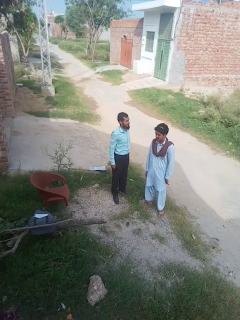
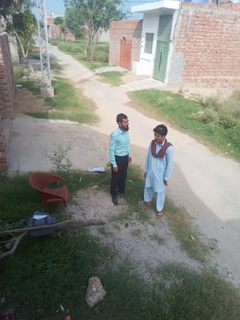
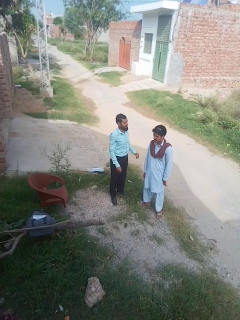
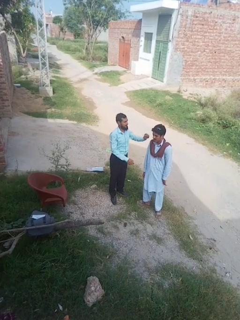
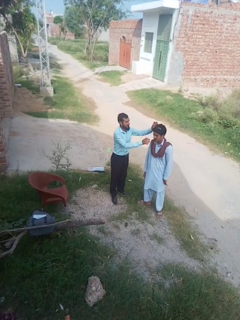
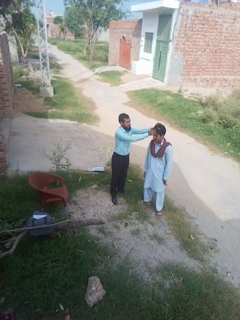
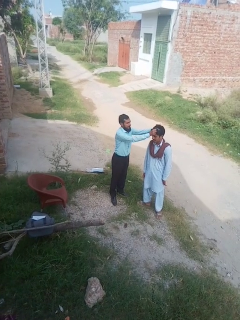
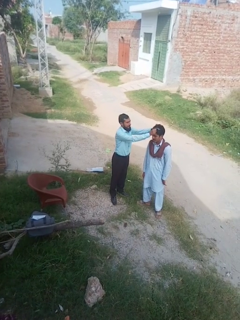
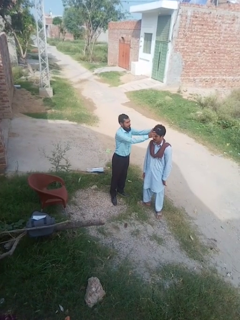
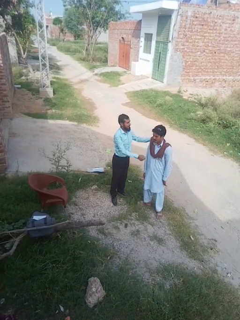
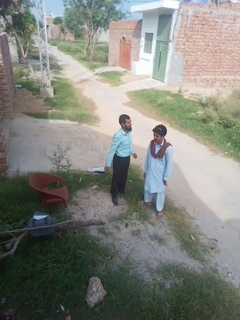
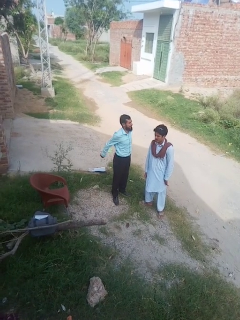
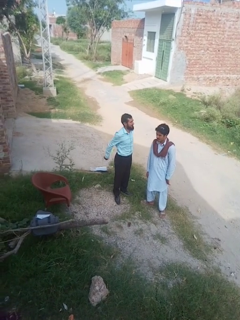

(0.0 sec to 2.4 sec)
person grabs person by hair

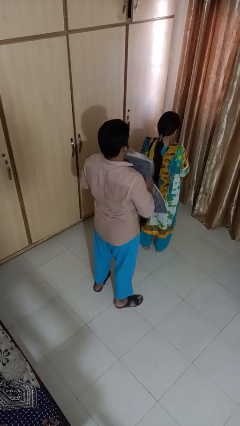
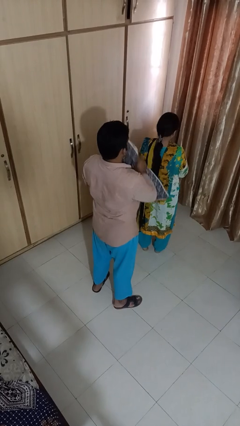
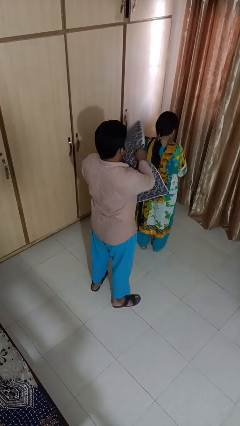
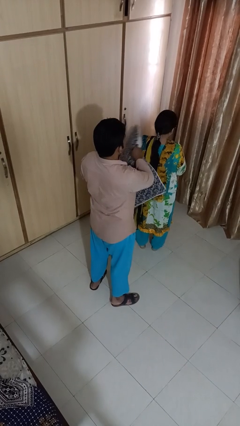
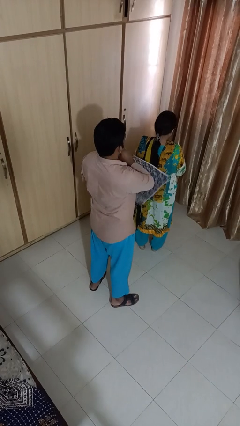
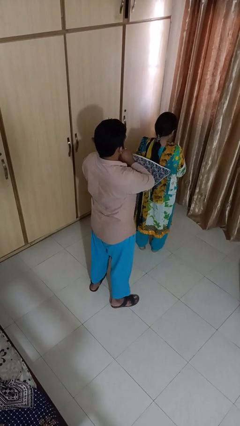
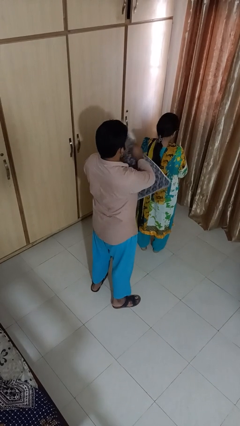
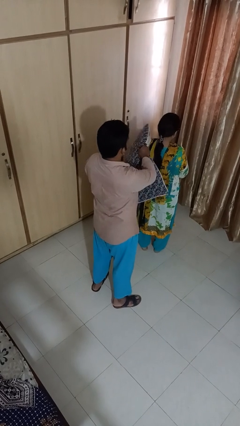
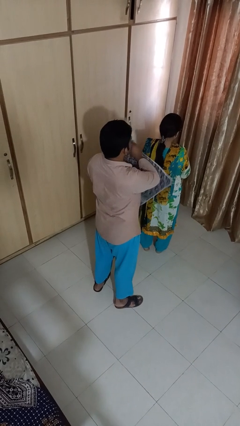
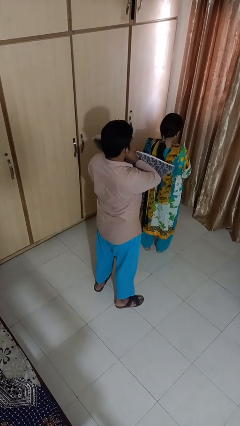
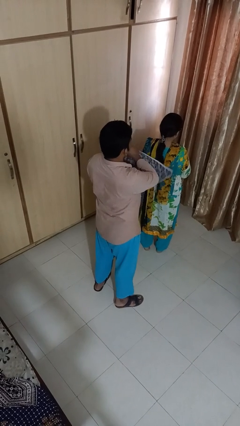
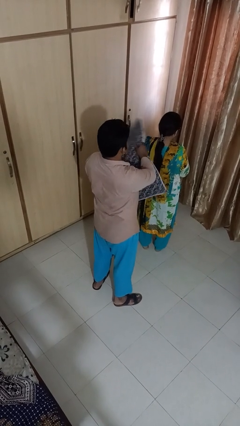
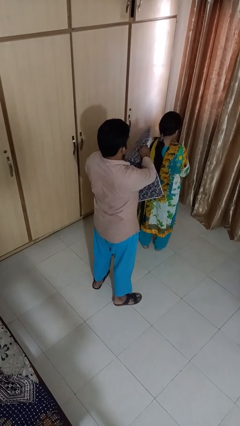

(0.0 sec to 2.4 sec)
person hits person with pillow

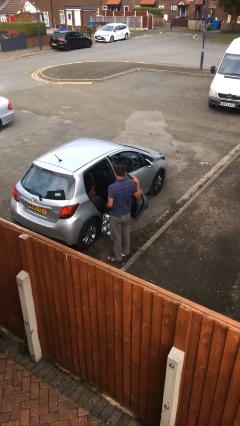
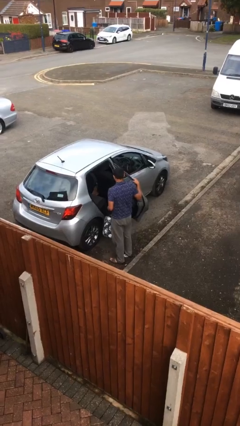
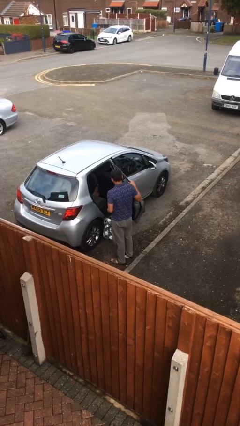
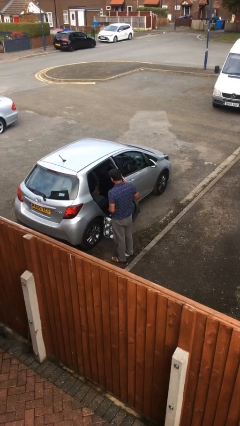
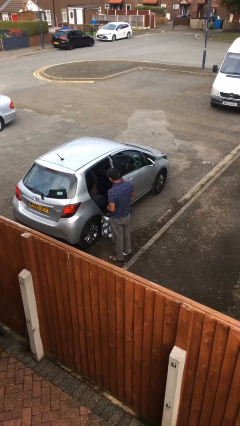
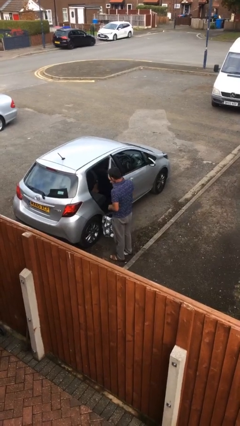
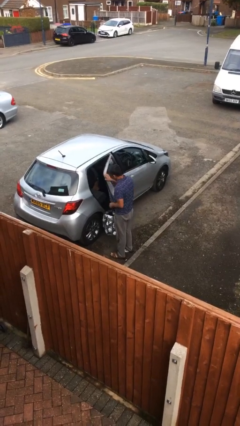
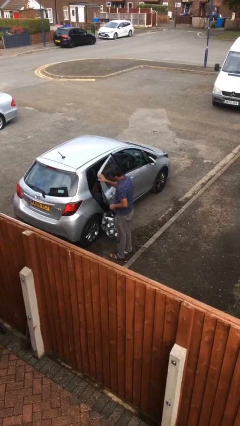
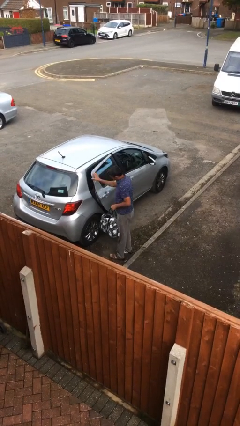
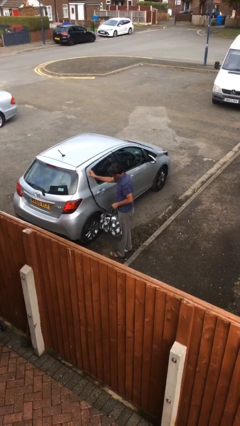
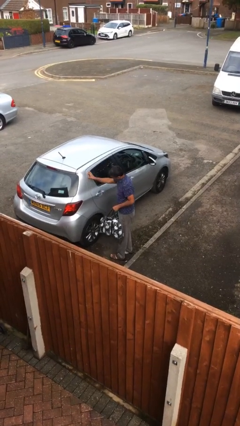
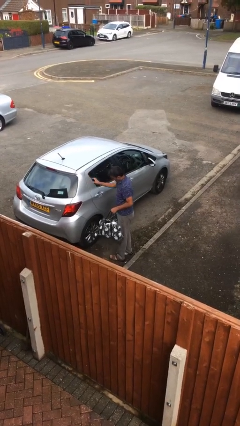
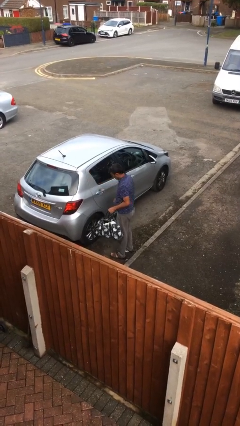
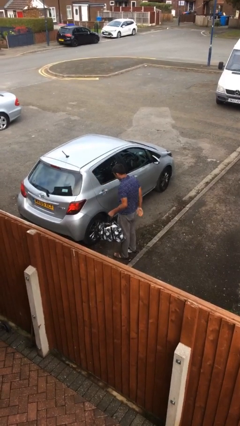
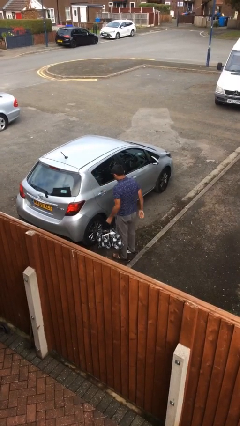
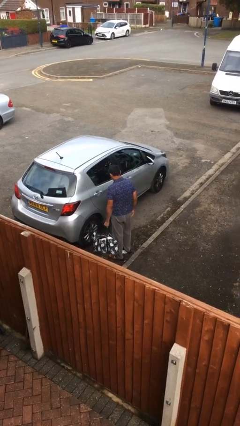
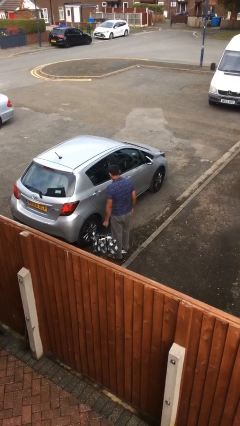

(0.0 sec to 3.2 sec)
person closes car door

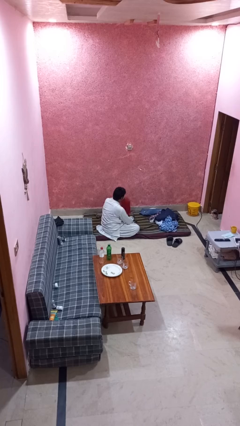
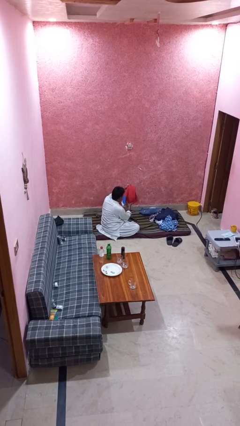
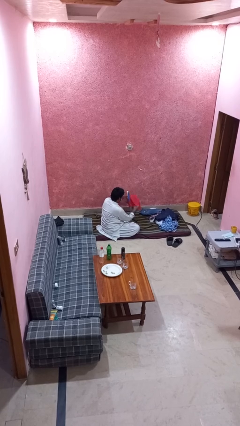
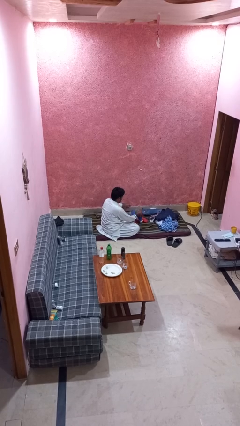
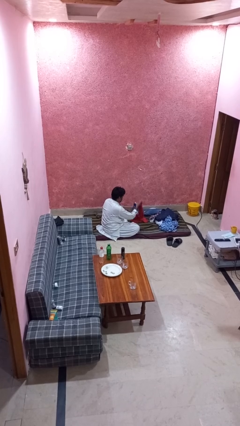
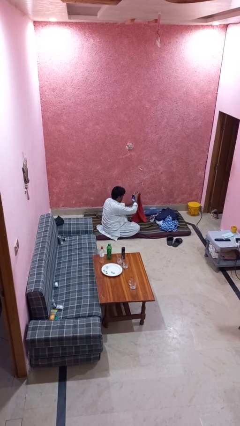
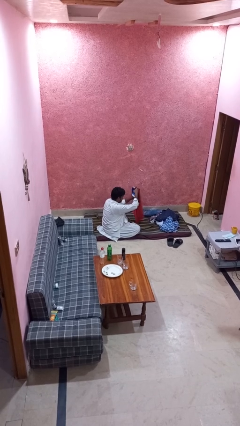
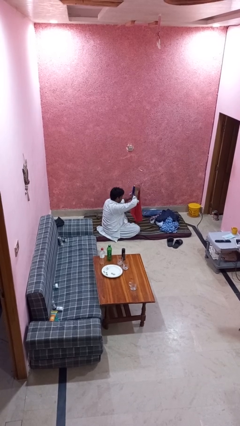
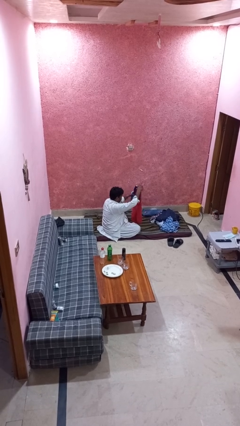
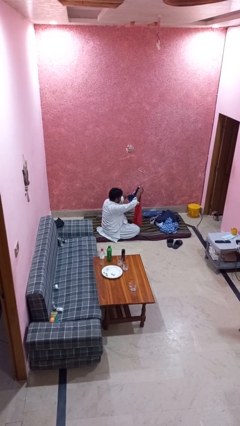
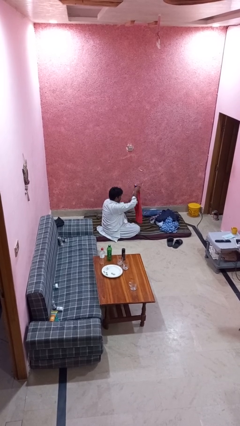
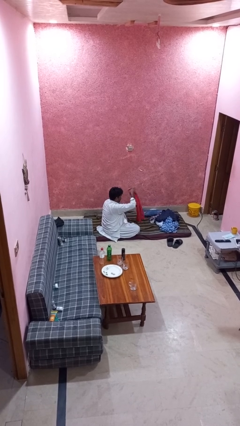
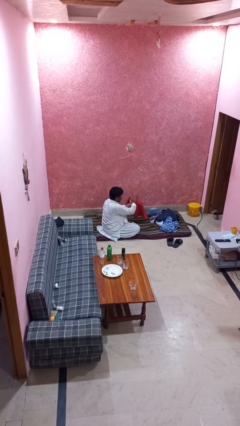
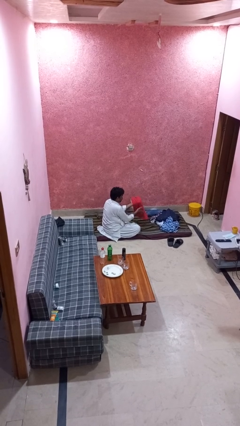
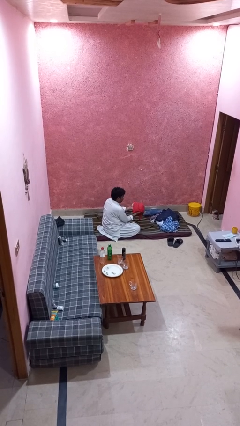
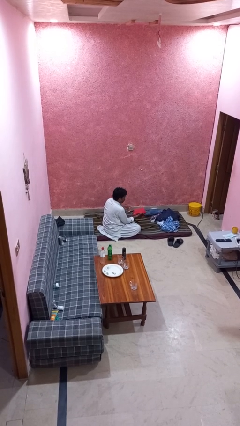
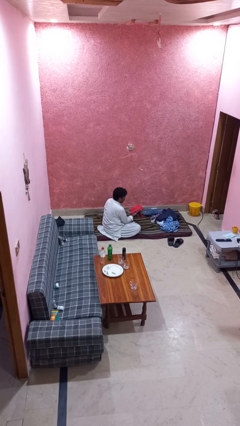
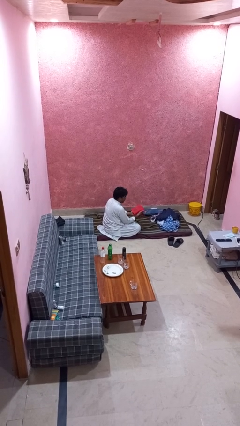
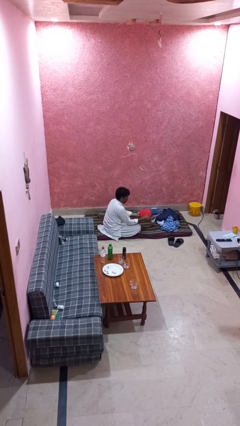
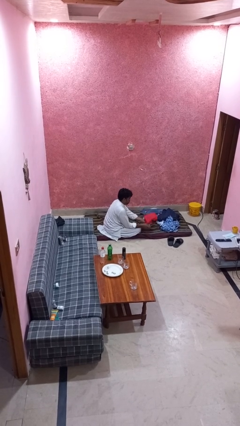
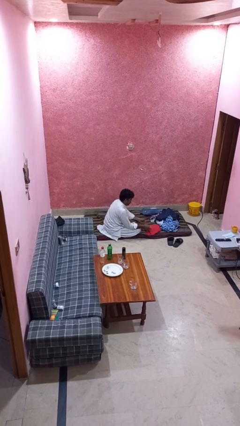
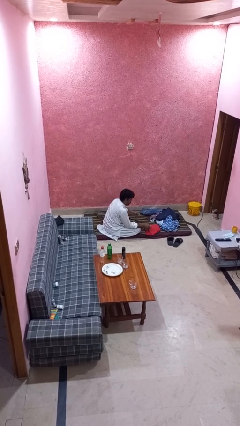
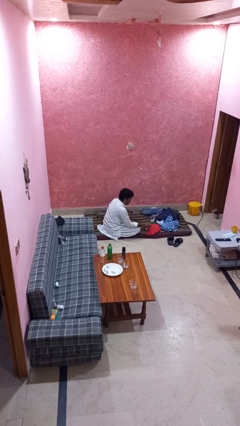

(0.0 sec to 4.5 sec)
person folds shirt

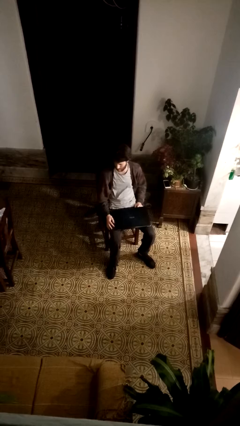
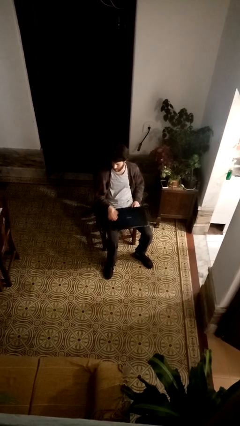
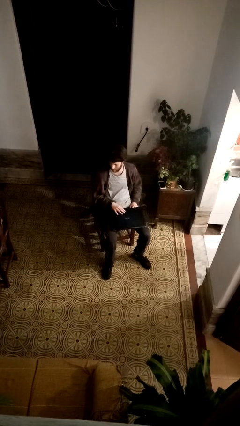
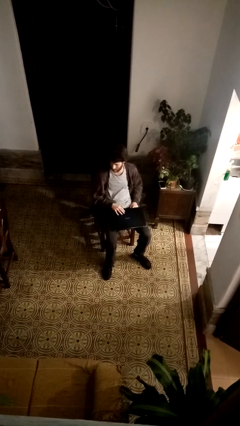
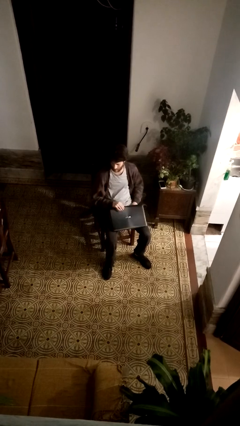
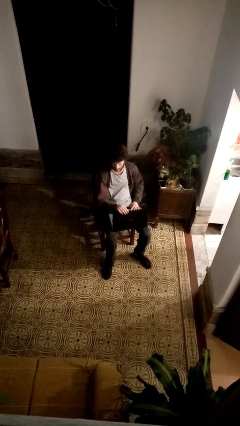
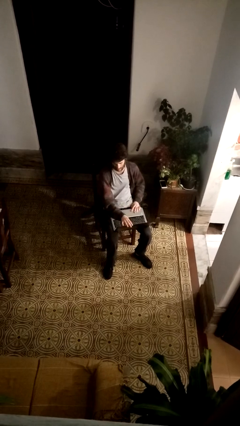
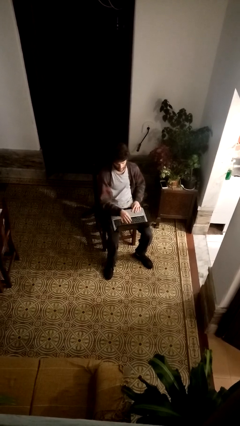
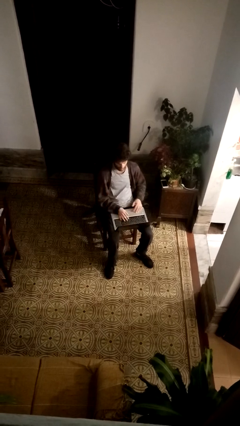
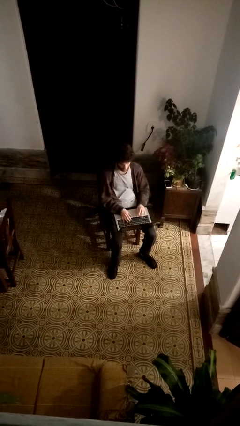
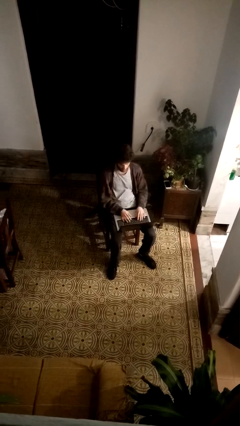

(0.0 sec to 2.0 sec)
person opens laptop

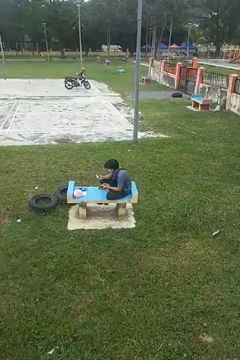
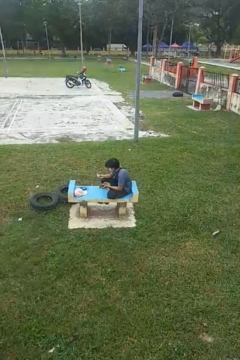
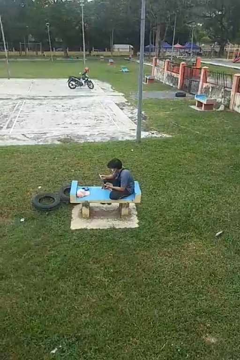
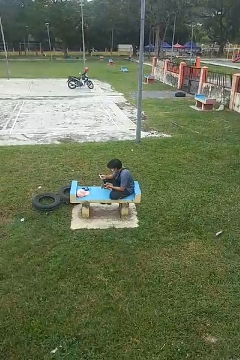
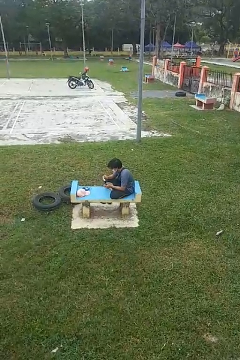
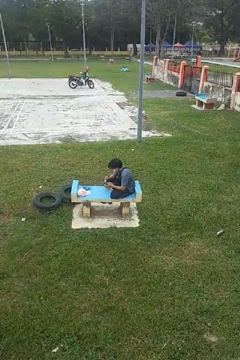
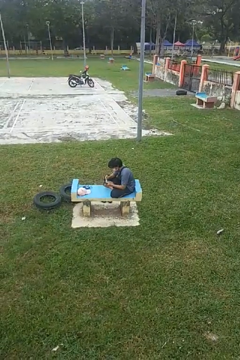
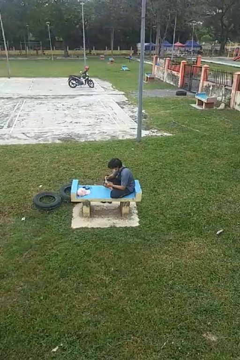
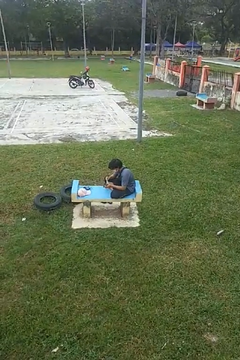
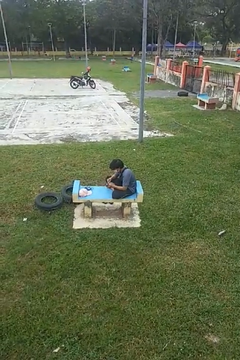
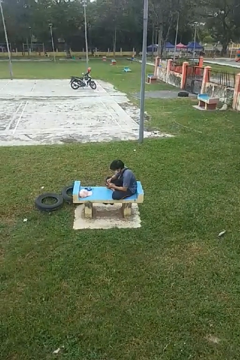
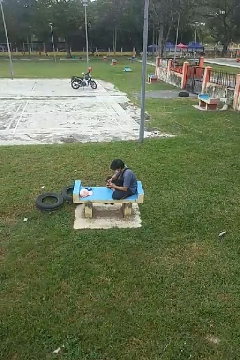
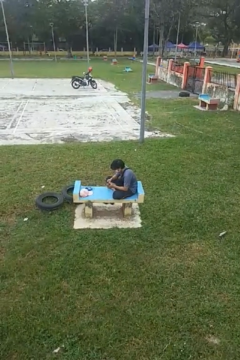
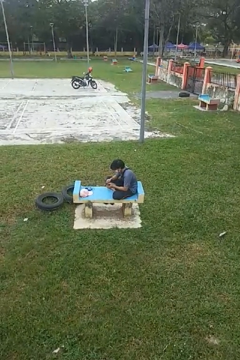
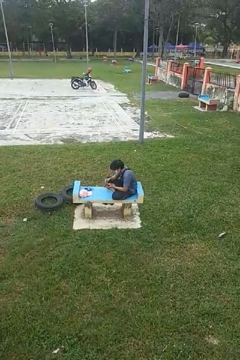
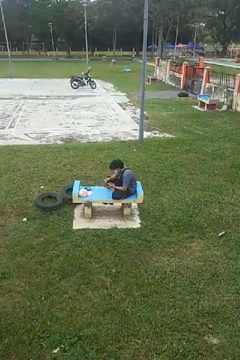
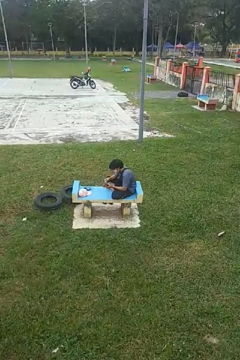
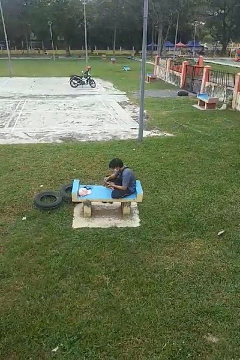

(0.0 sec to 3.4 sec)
person puts object into purse

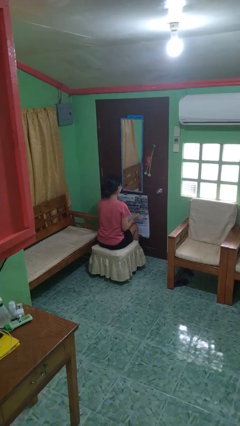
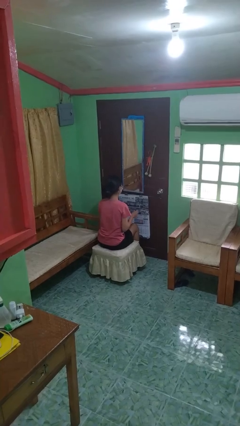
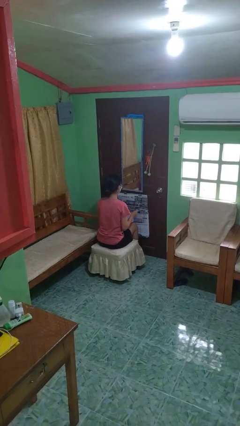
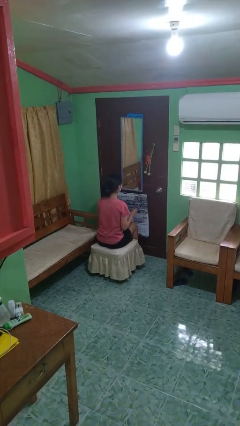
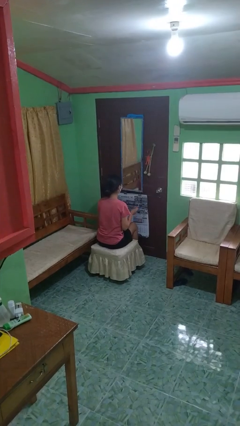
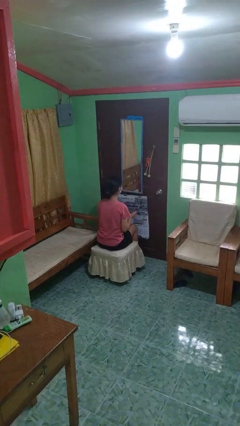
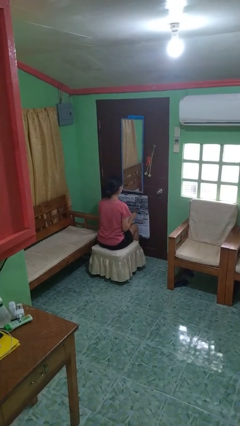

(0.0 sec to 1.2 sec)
person snaps fingers
